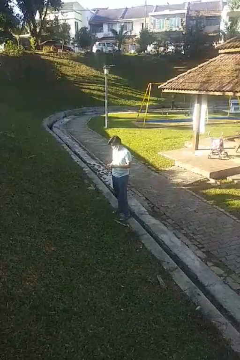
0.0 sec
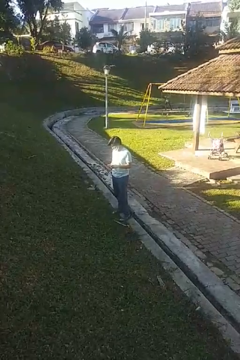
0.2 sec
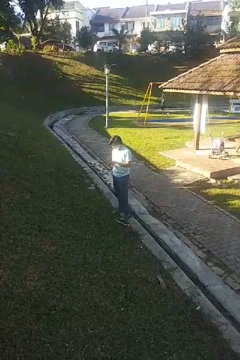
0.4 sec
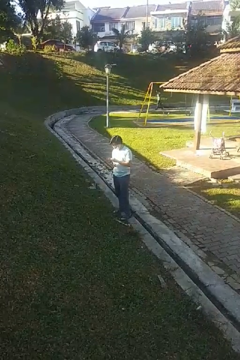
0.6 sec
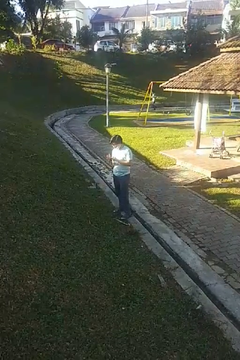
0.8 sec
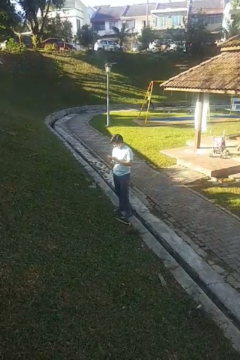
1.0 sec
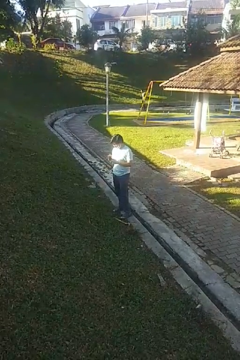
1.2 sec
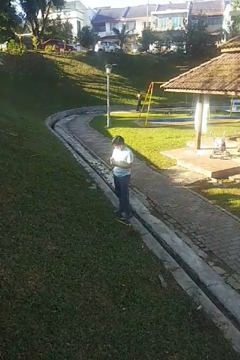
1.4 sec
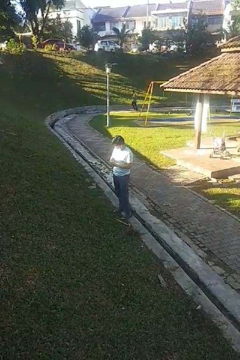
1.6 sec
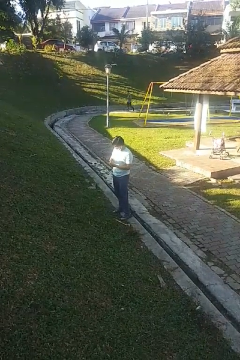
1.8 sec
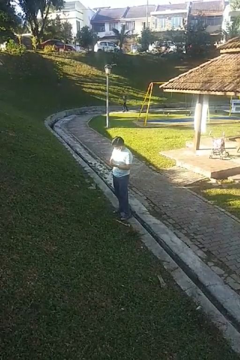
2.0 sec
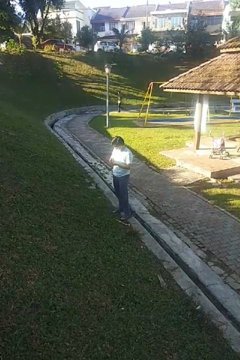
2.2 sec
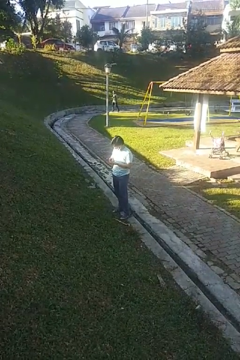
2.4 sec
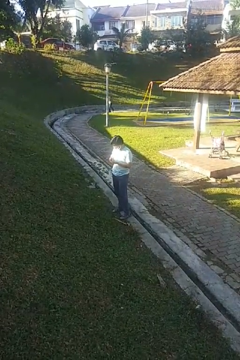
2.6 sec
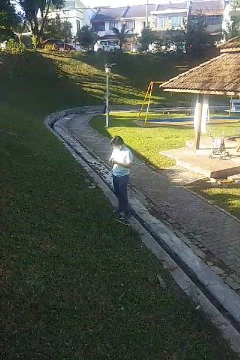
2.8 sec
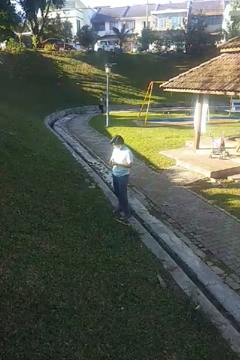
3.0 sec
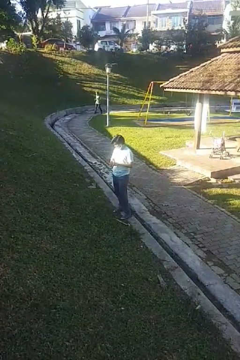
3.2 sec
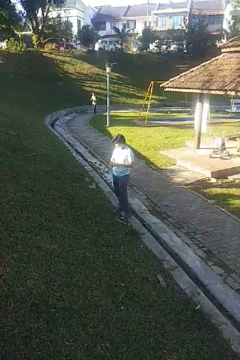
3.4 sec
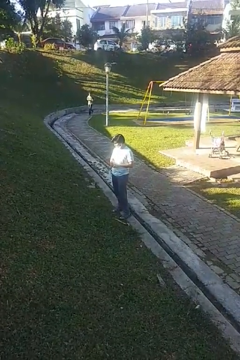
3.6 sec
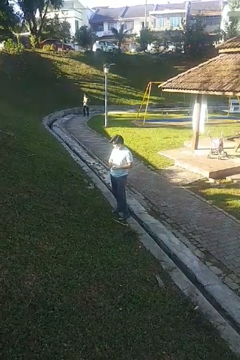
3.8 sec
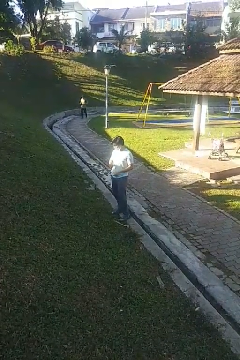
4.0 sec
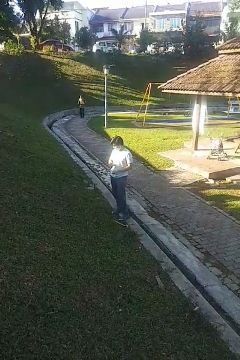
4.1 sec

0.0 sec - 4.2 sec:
person puts on wristwatch

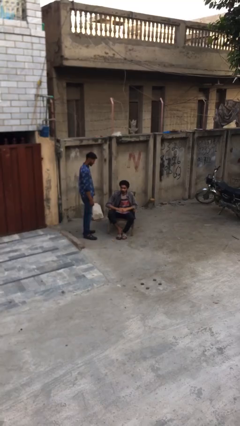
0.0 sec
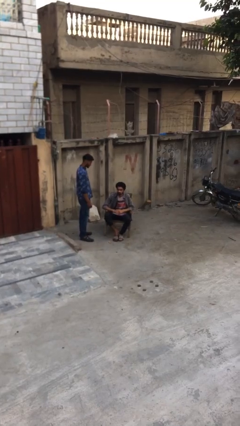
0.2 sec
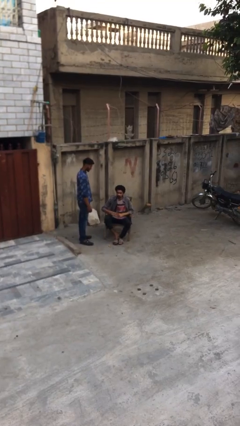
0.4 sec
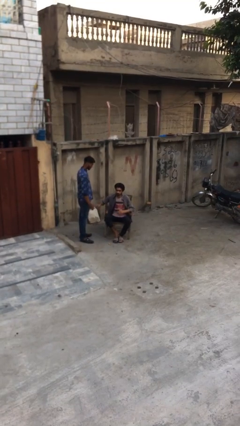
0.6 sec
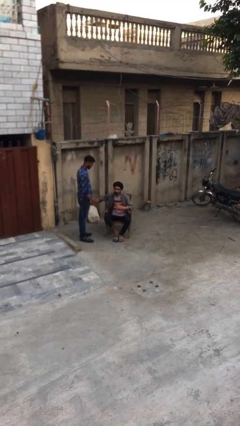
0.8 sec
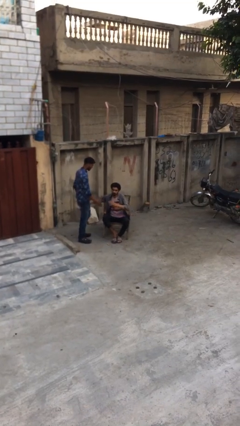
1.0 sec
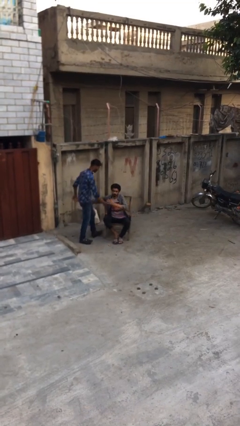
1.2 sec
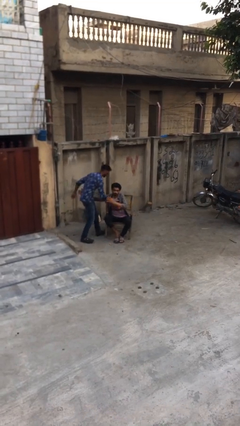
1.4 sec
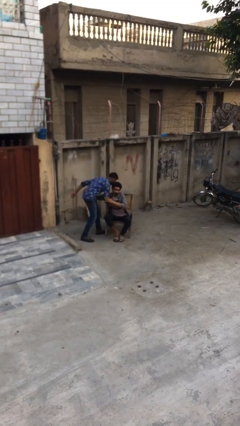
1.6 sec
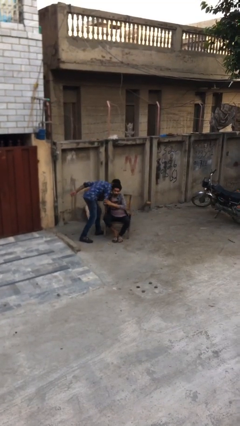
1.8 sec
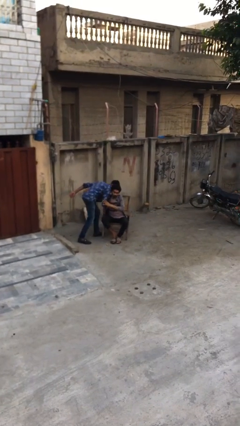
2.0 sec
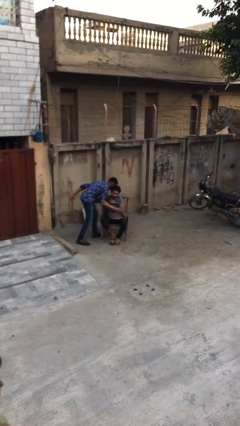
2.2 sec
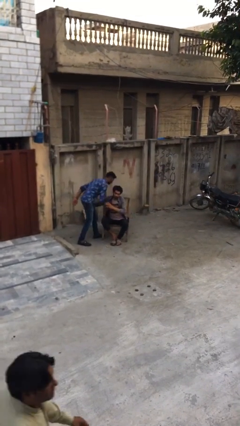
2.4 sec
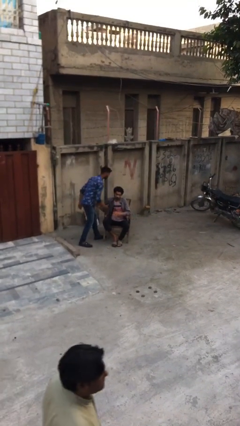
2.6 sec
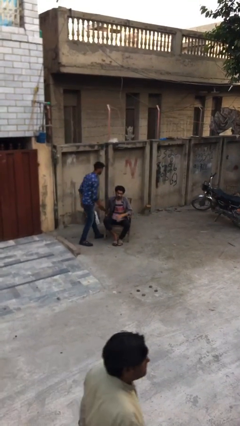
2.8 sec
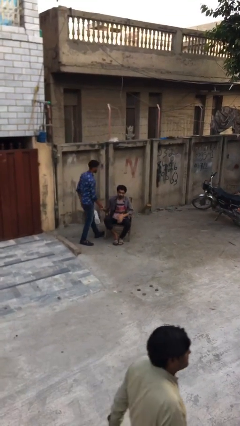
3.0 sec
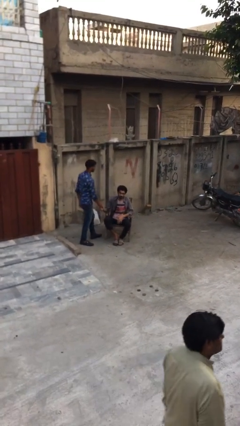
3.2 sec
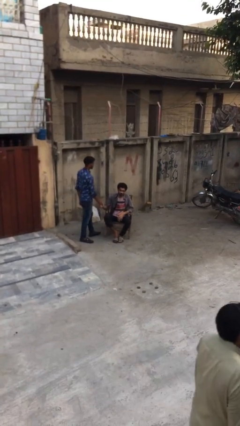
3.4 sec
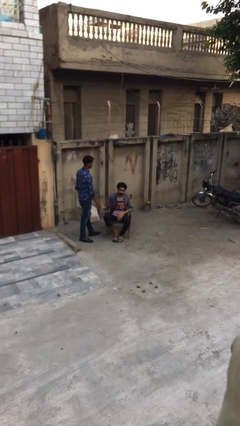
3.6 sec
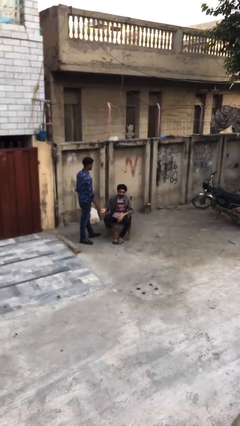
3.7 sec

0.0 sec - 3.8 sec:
person embraces person

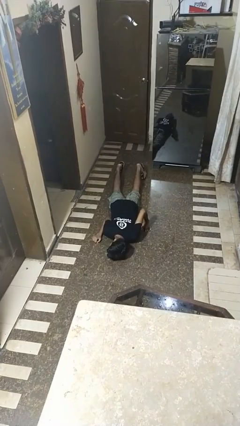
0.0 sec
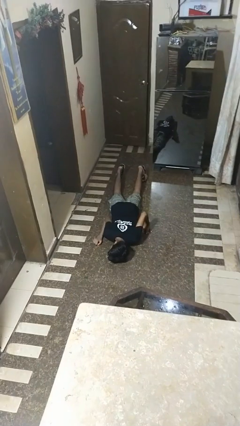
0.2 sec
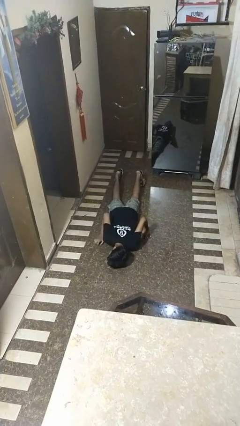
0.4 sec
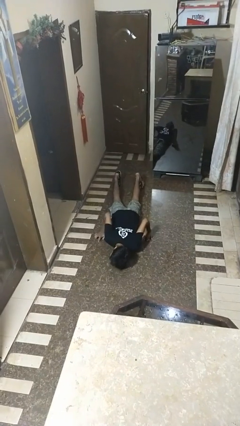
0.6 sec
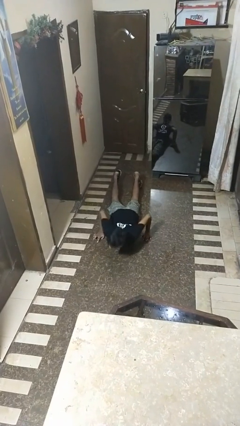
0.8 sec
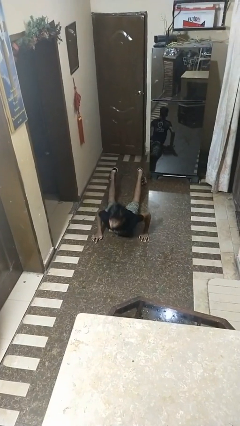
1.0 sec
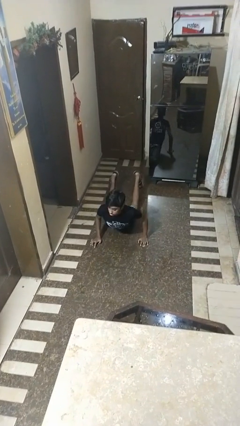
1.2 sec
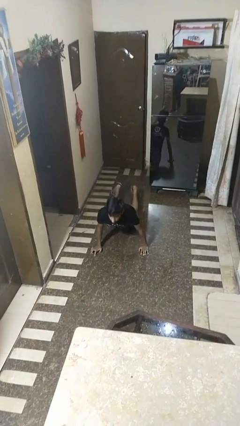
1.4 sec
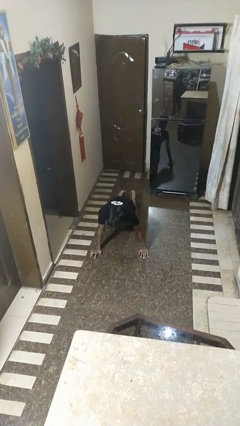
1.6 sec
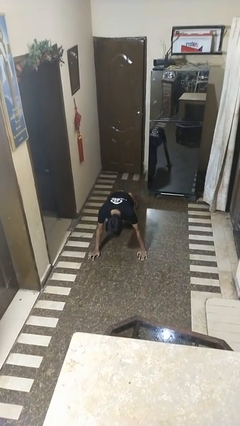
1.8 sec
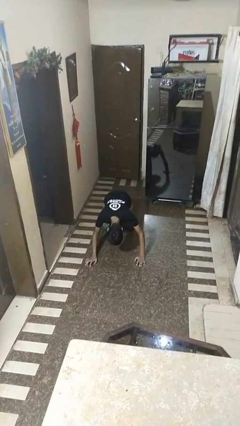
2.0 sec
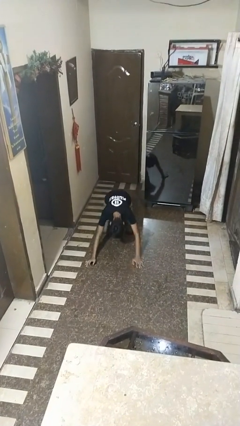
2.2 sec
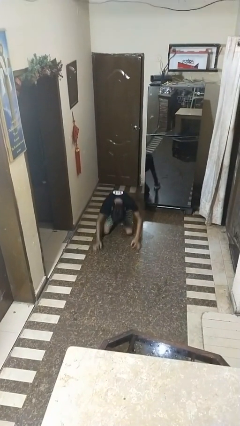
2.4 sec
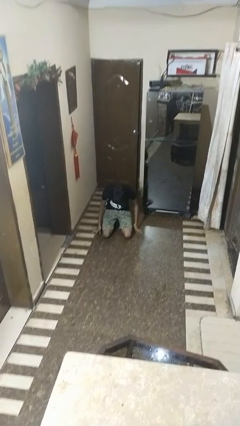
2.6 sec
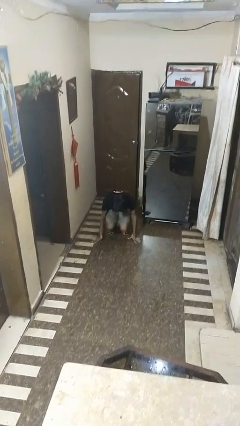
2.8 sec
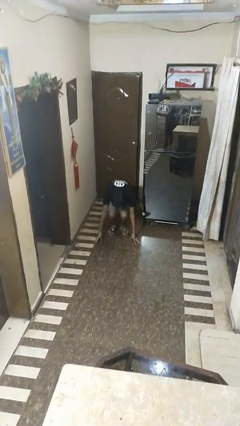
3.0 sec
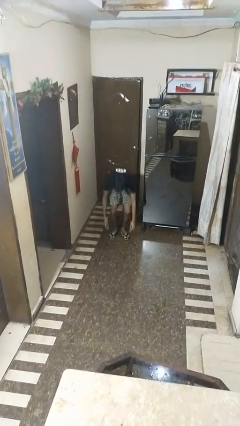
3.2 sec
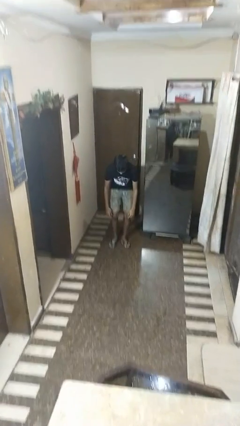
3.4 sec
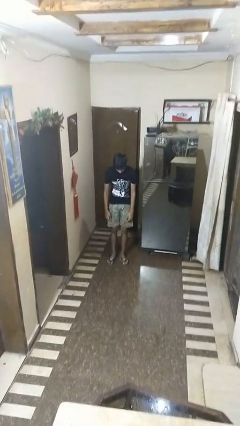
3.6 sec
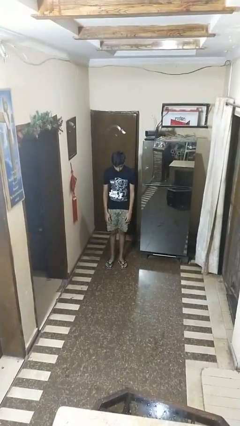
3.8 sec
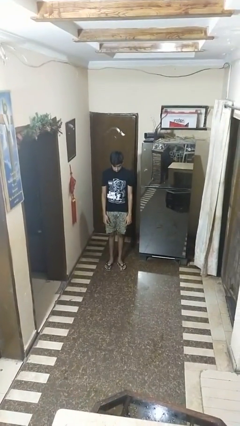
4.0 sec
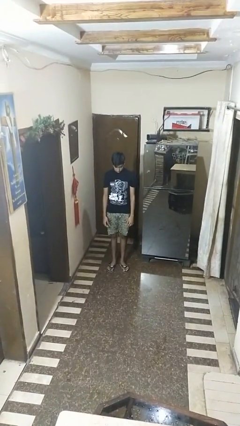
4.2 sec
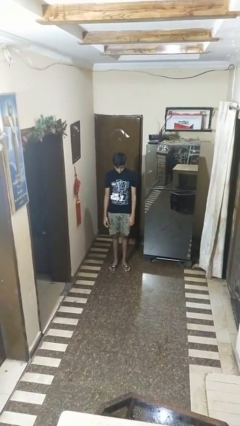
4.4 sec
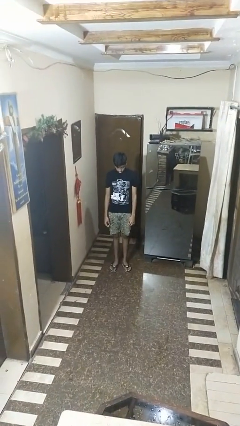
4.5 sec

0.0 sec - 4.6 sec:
person stands up from floor

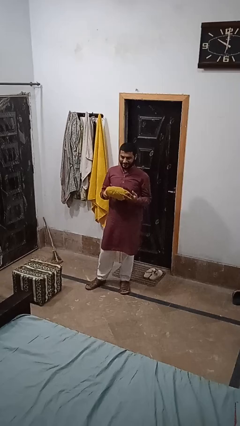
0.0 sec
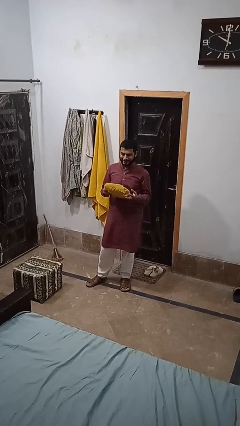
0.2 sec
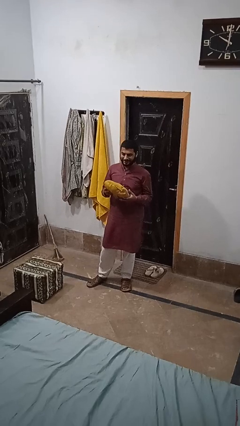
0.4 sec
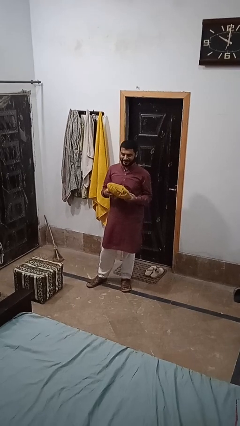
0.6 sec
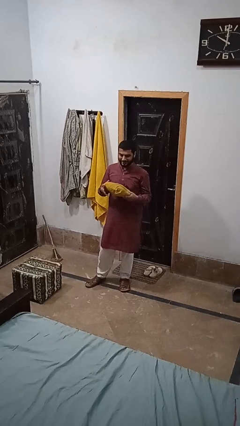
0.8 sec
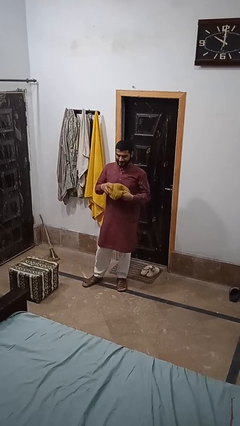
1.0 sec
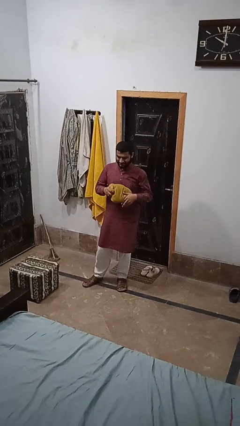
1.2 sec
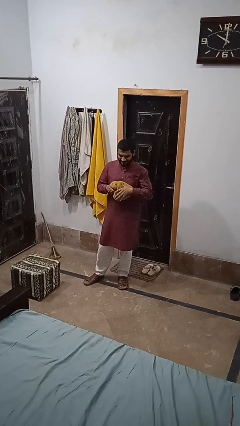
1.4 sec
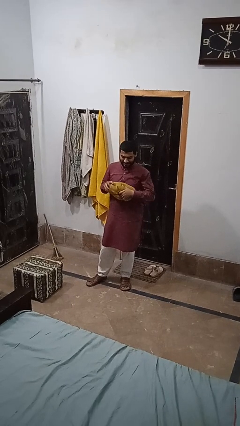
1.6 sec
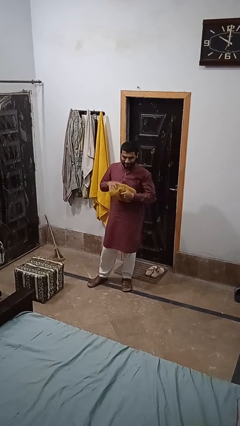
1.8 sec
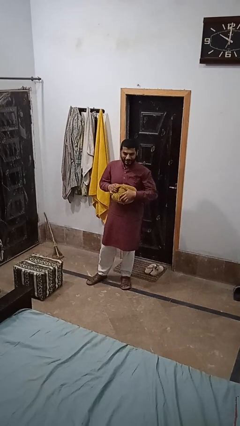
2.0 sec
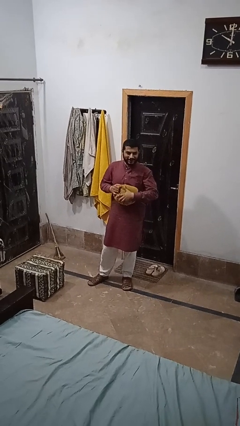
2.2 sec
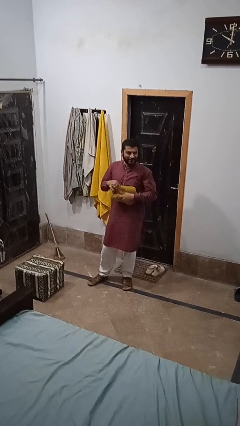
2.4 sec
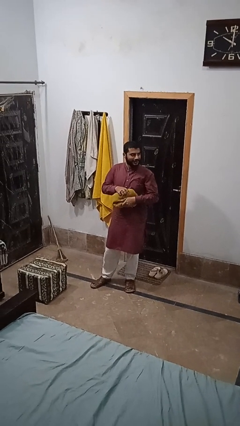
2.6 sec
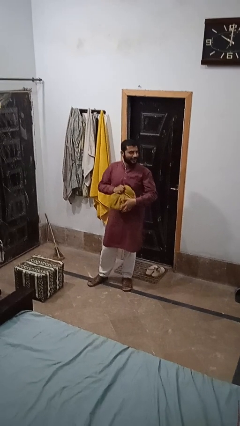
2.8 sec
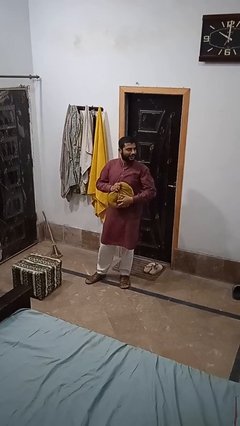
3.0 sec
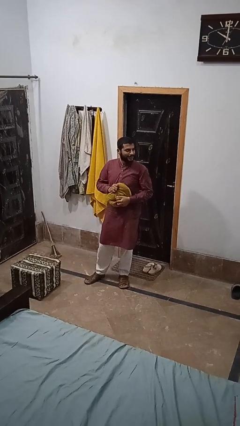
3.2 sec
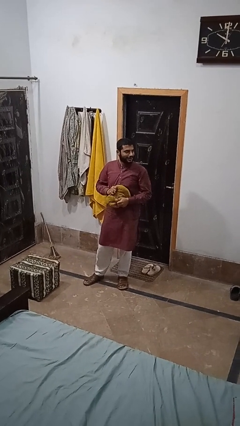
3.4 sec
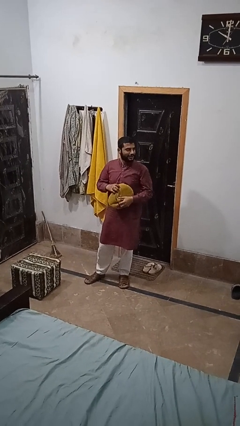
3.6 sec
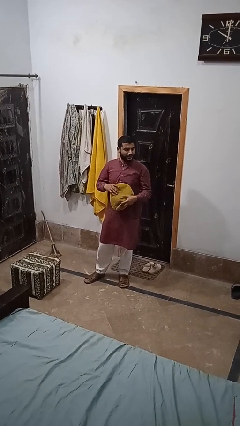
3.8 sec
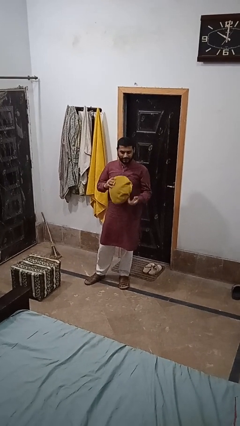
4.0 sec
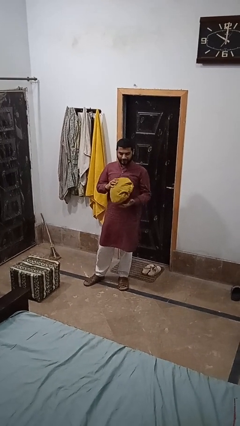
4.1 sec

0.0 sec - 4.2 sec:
person squeezes object

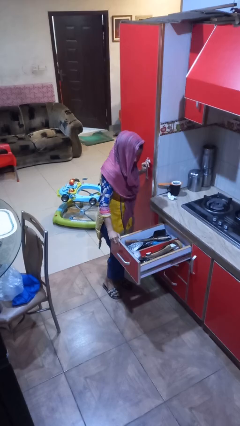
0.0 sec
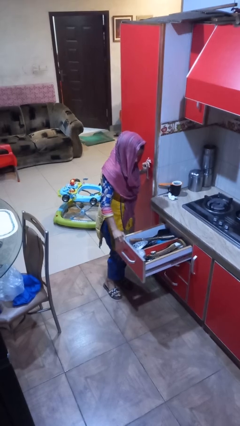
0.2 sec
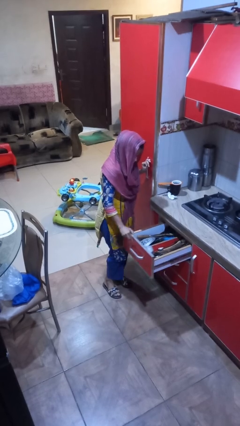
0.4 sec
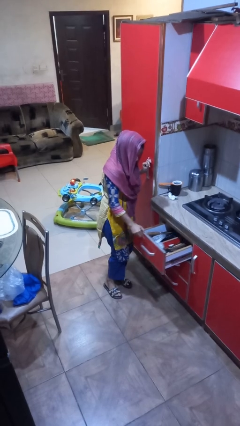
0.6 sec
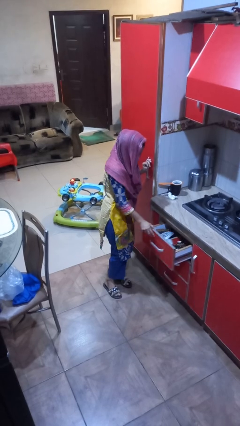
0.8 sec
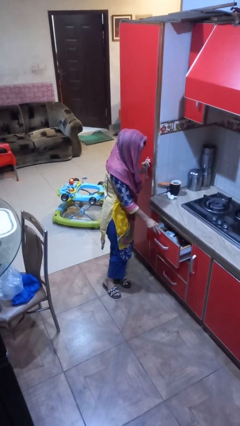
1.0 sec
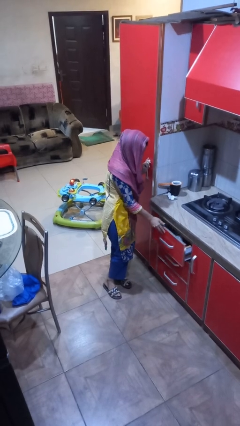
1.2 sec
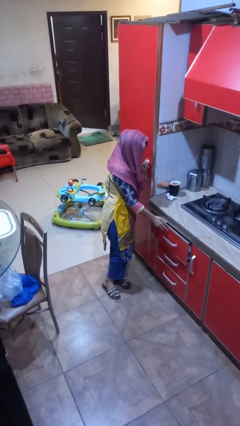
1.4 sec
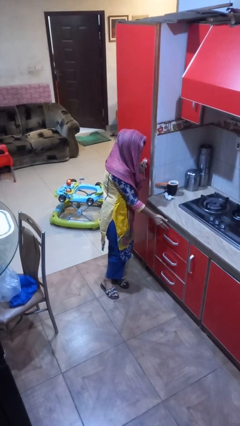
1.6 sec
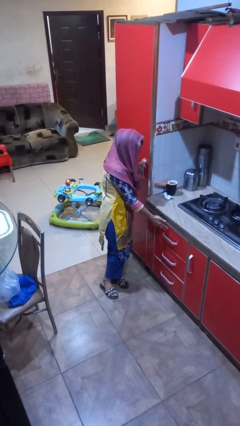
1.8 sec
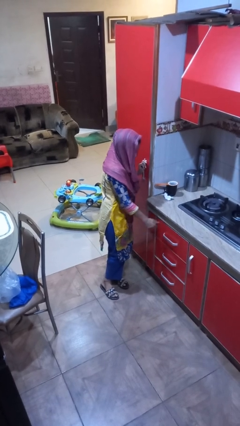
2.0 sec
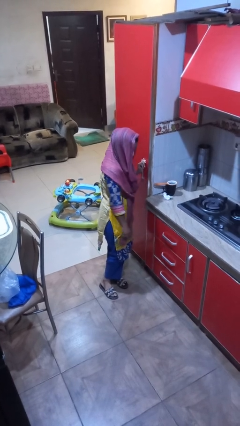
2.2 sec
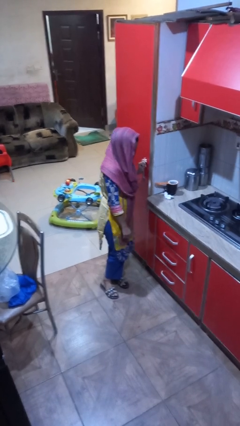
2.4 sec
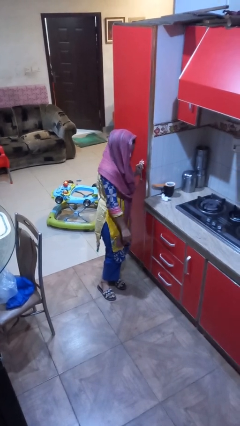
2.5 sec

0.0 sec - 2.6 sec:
person closes kitchen drawer
